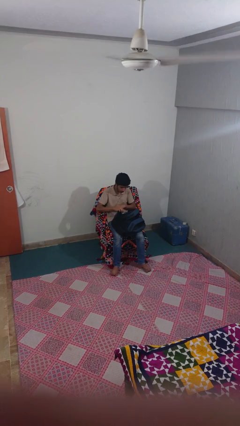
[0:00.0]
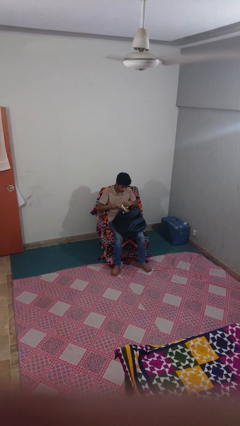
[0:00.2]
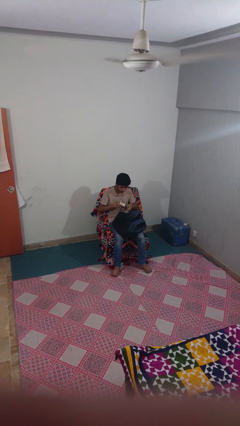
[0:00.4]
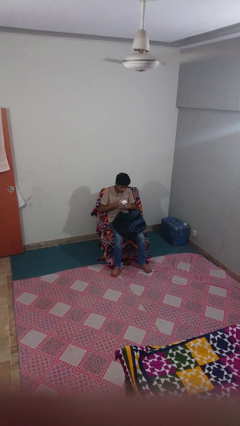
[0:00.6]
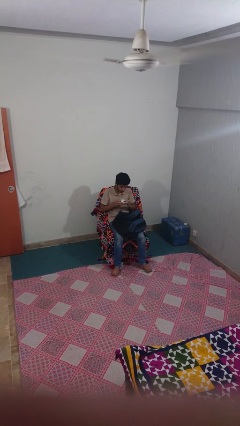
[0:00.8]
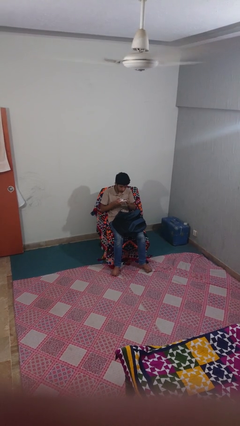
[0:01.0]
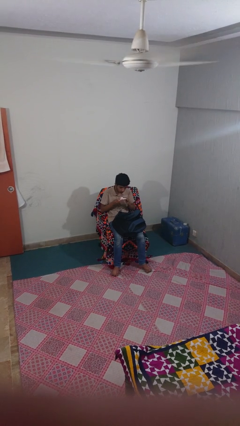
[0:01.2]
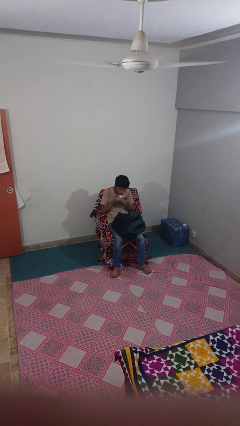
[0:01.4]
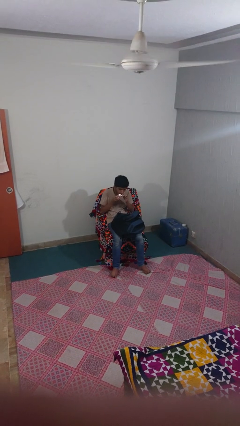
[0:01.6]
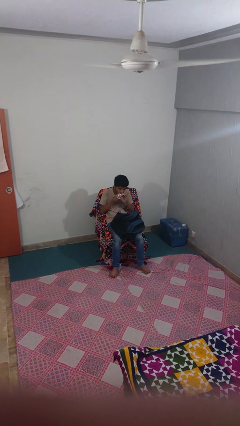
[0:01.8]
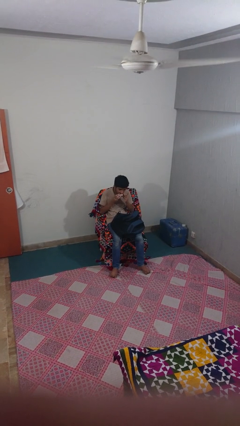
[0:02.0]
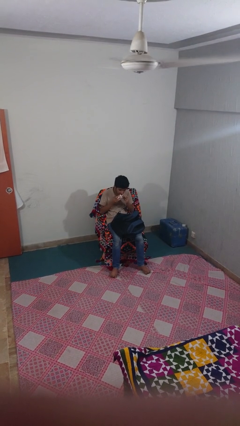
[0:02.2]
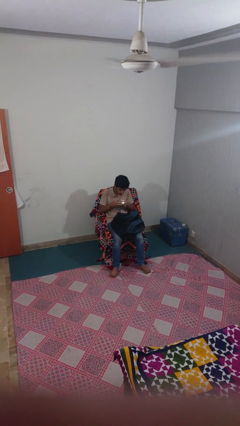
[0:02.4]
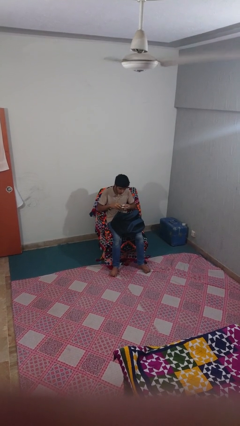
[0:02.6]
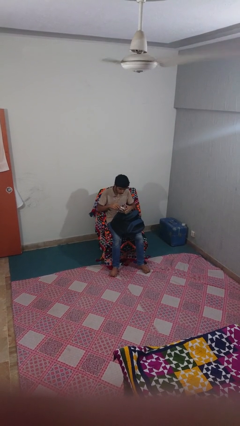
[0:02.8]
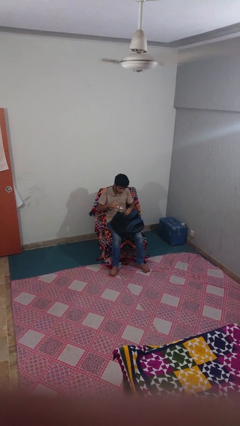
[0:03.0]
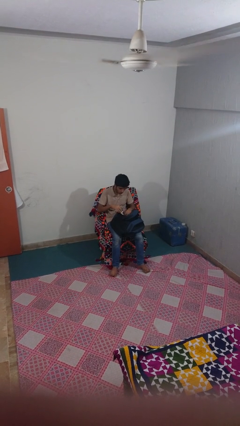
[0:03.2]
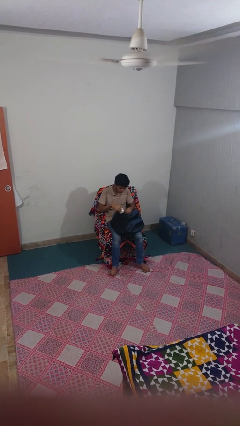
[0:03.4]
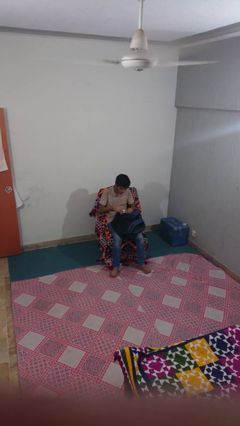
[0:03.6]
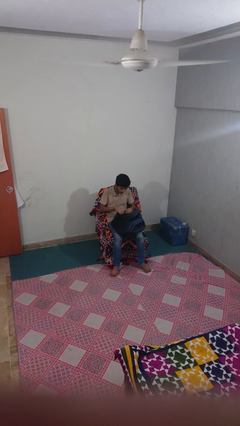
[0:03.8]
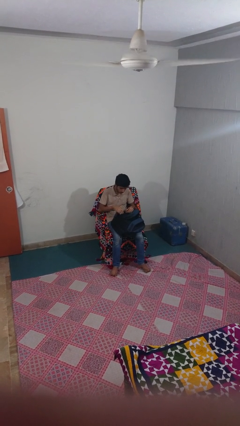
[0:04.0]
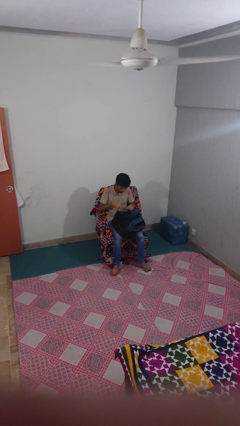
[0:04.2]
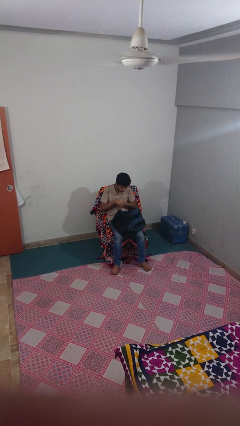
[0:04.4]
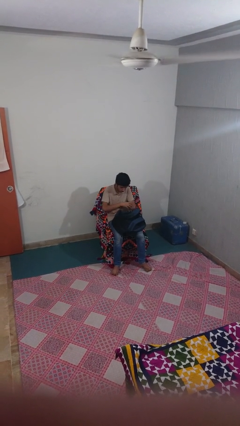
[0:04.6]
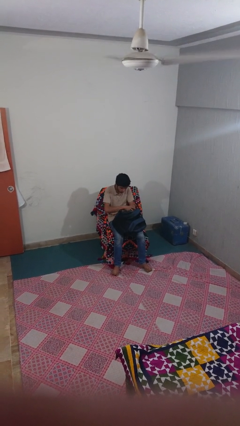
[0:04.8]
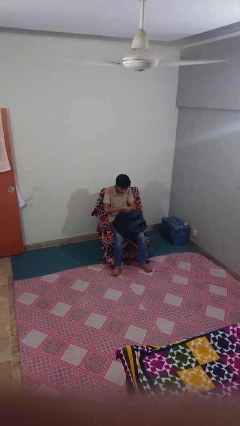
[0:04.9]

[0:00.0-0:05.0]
person eats snack from bag

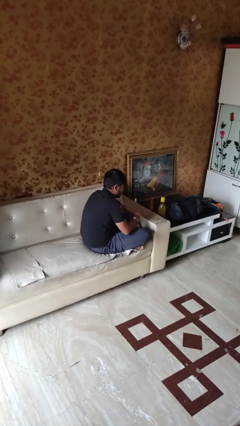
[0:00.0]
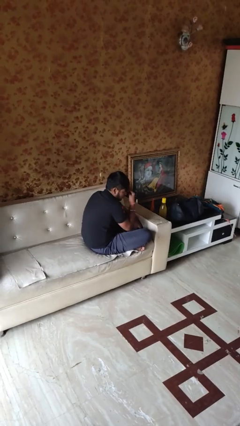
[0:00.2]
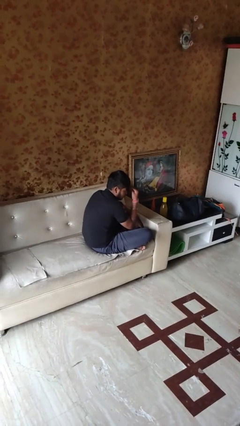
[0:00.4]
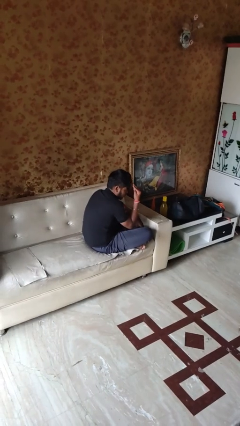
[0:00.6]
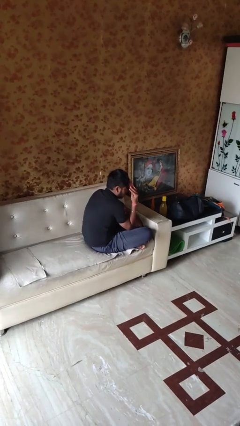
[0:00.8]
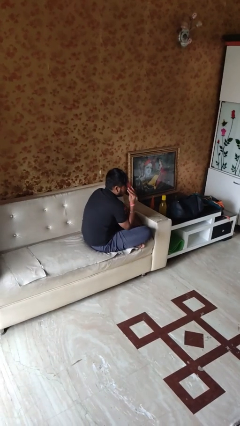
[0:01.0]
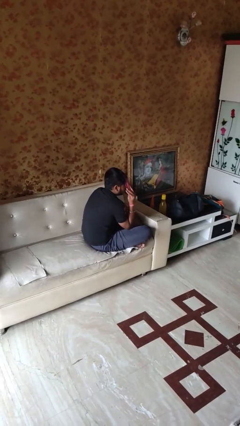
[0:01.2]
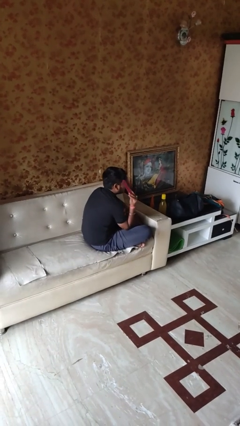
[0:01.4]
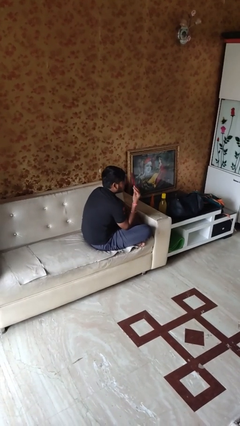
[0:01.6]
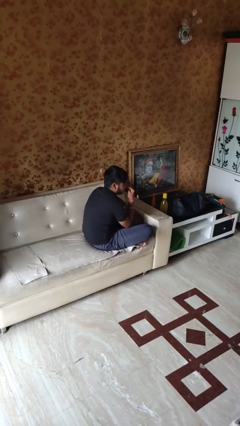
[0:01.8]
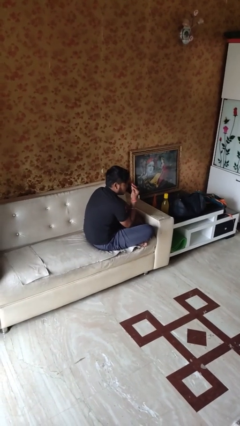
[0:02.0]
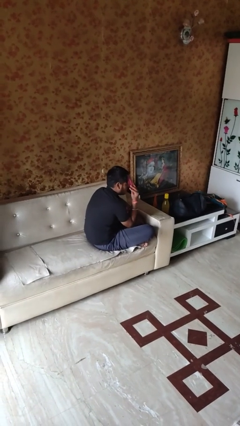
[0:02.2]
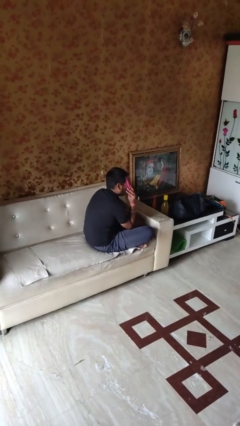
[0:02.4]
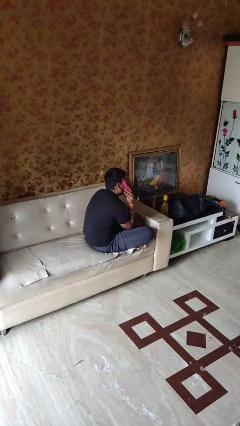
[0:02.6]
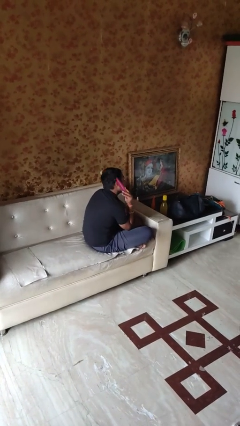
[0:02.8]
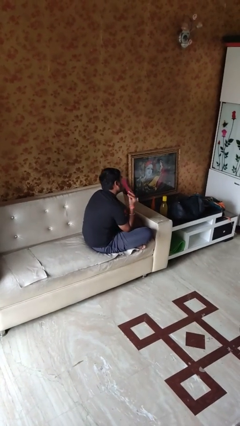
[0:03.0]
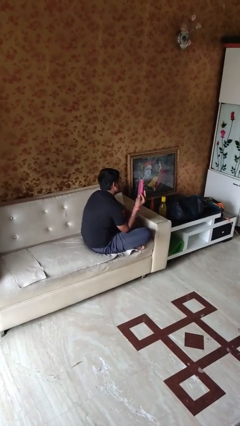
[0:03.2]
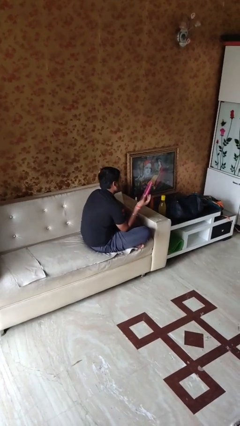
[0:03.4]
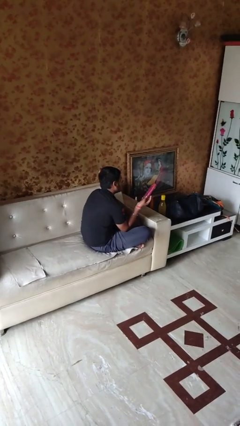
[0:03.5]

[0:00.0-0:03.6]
person brushes hair

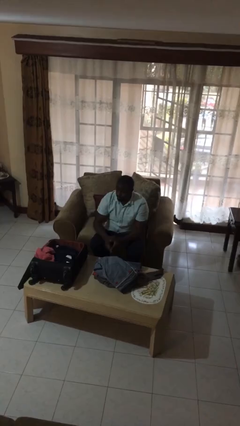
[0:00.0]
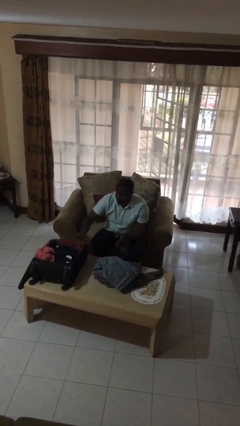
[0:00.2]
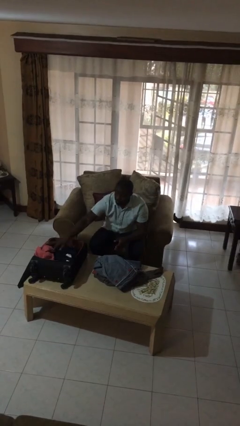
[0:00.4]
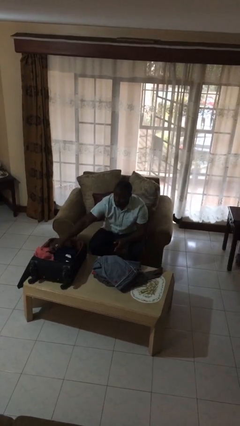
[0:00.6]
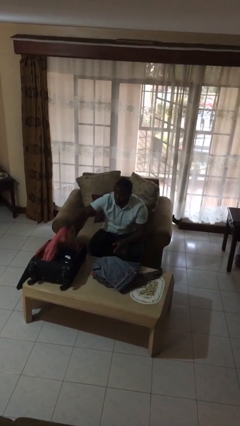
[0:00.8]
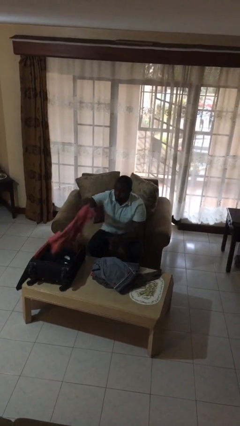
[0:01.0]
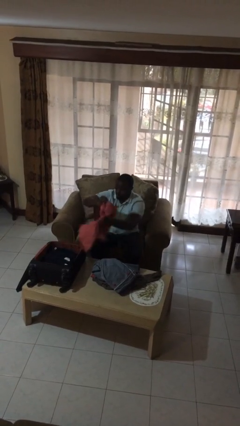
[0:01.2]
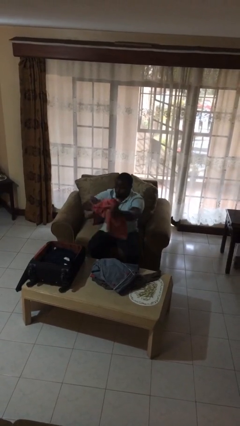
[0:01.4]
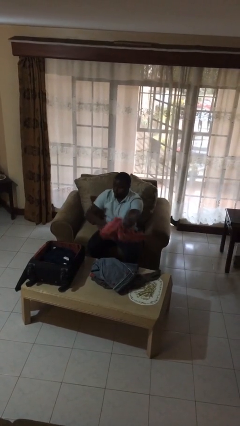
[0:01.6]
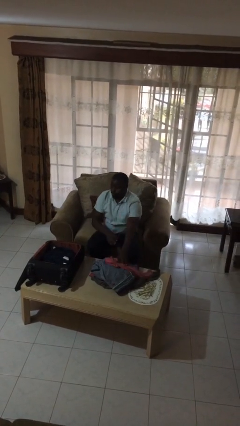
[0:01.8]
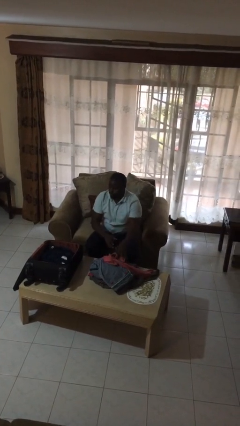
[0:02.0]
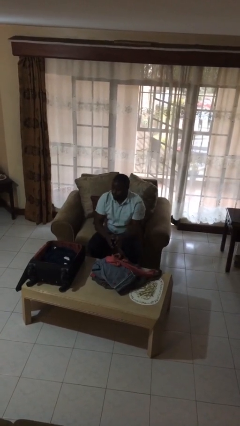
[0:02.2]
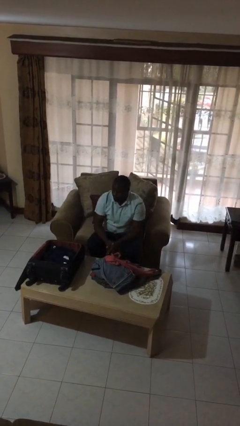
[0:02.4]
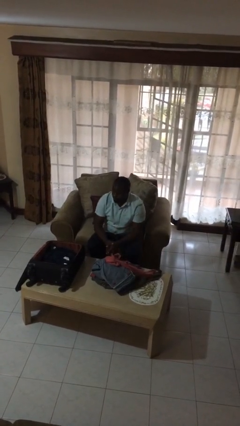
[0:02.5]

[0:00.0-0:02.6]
person unloads clothes from suitcase

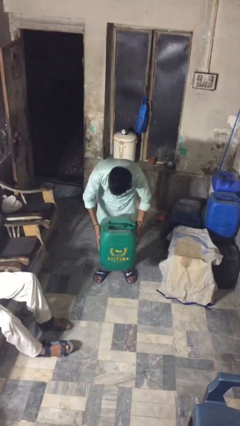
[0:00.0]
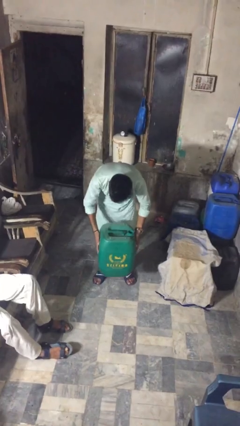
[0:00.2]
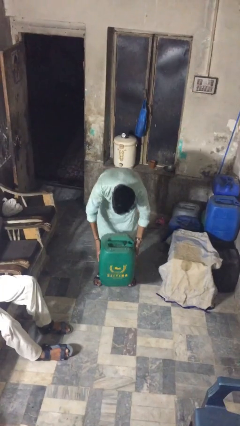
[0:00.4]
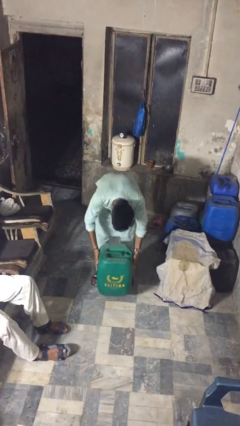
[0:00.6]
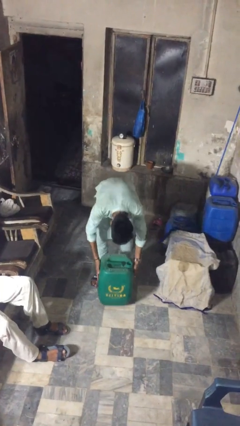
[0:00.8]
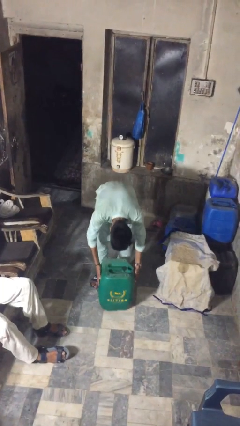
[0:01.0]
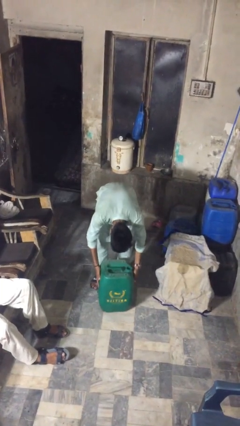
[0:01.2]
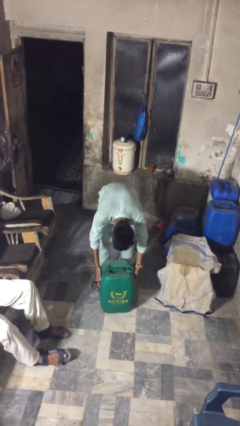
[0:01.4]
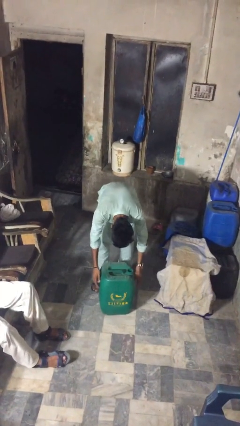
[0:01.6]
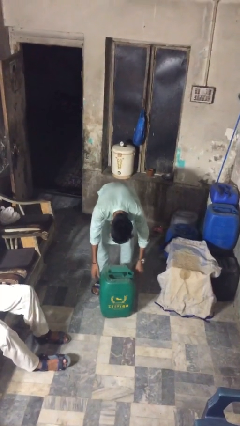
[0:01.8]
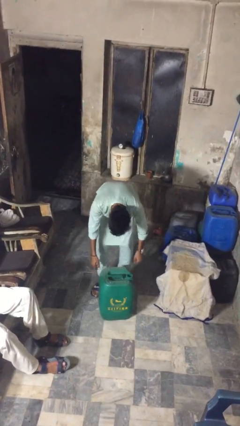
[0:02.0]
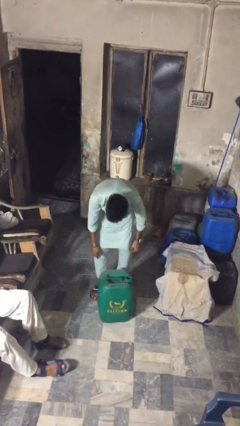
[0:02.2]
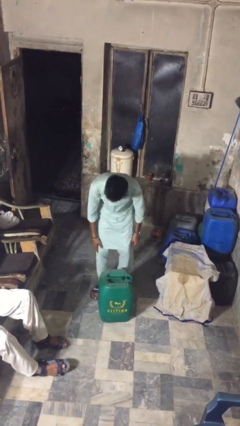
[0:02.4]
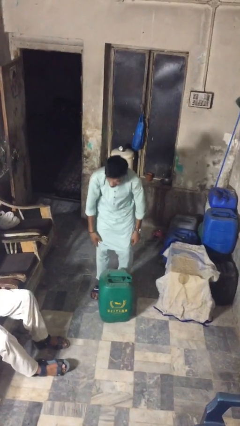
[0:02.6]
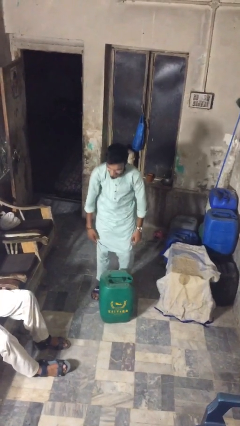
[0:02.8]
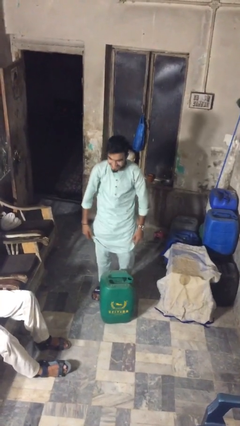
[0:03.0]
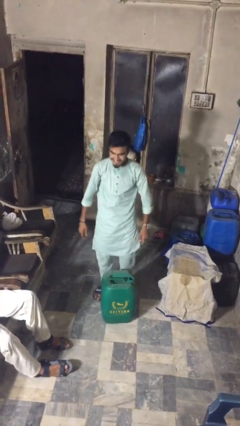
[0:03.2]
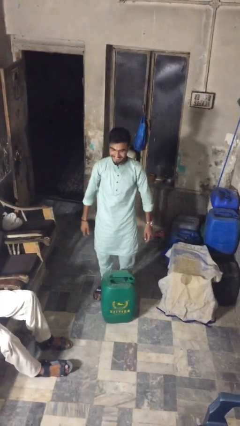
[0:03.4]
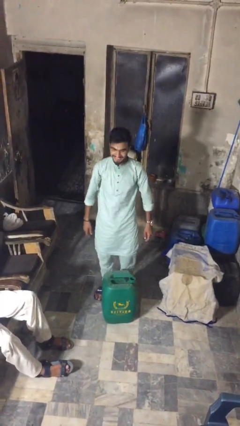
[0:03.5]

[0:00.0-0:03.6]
person puts down object on floor

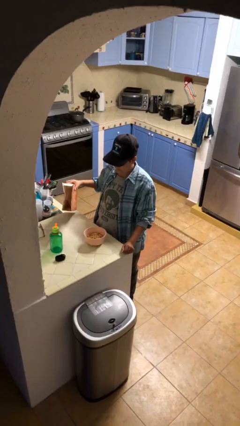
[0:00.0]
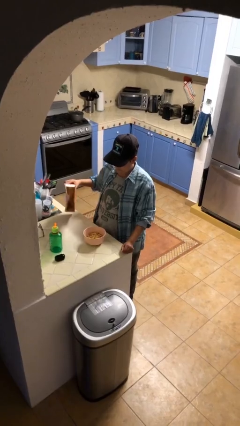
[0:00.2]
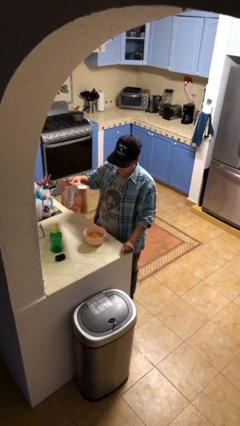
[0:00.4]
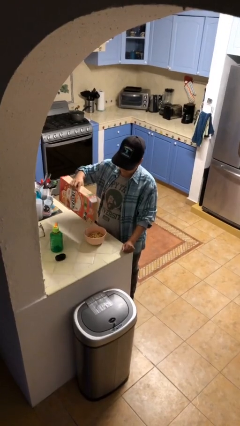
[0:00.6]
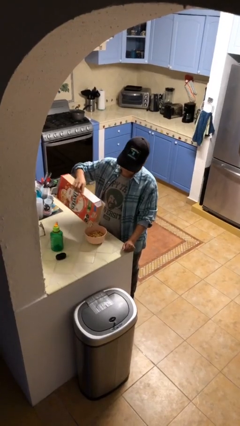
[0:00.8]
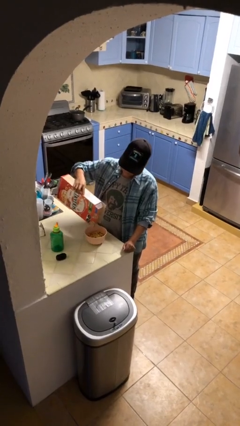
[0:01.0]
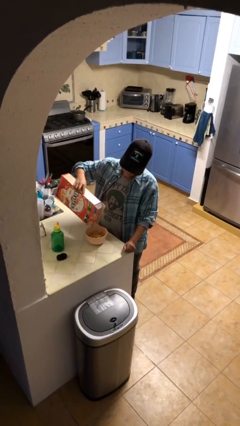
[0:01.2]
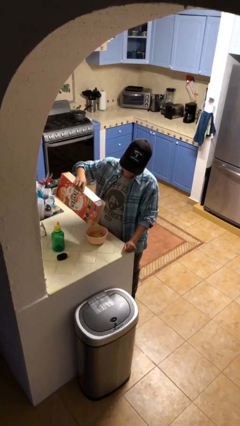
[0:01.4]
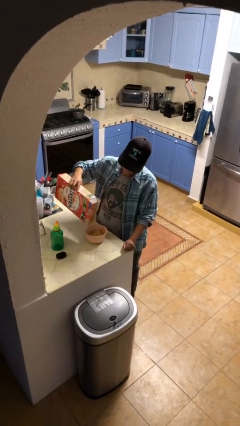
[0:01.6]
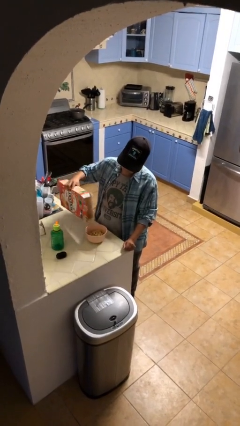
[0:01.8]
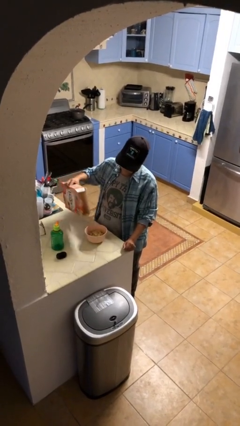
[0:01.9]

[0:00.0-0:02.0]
person pours into bowl

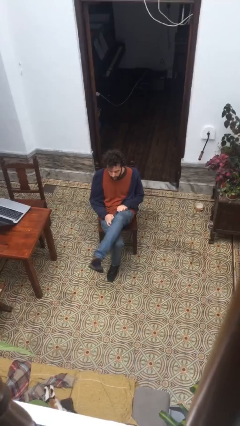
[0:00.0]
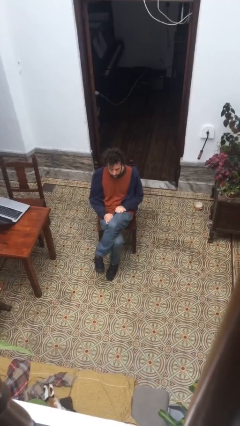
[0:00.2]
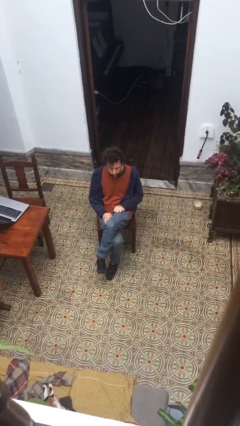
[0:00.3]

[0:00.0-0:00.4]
person crosses legs
